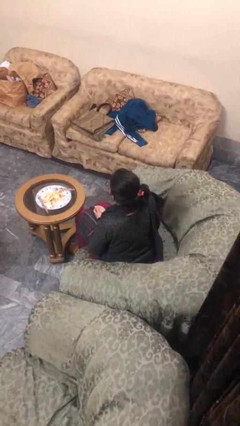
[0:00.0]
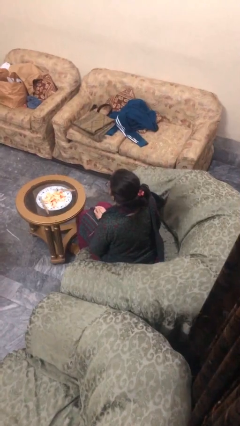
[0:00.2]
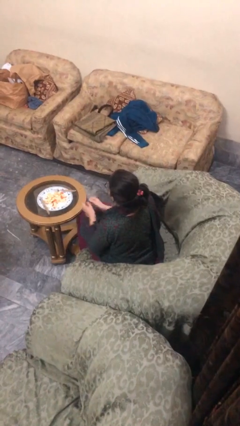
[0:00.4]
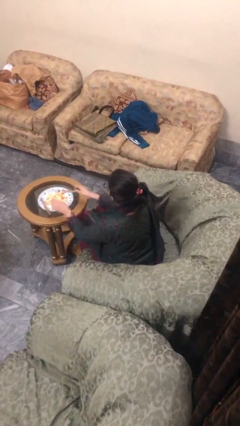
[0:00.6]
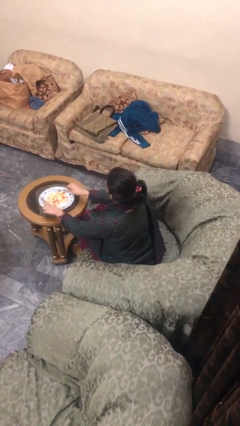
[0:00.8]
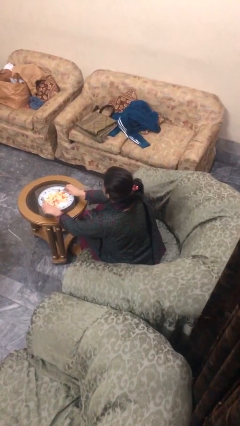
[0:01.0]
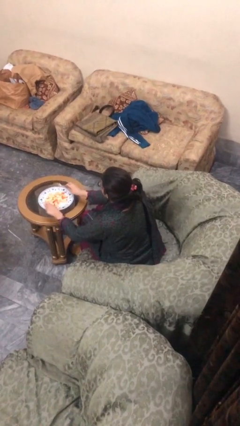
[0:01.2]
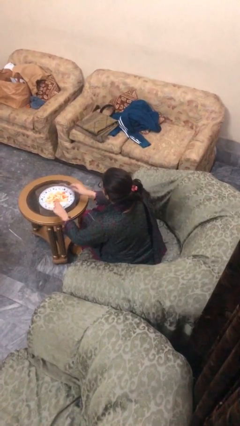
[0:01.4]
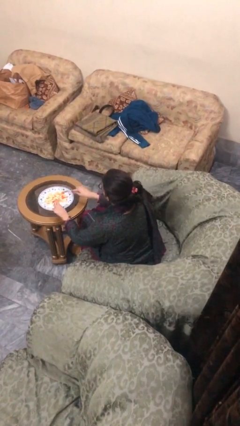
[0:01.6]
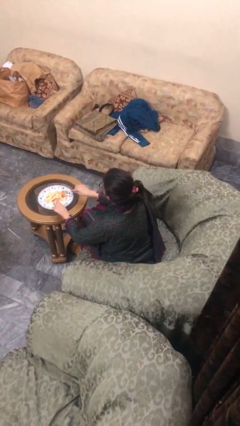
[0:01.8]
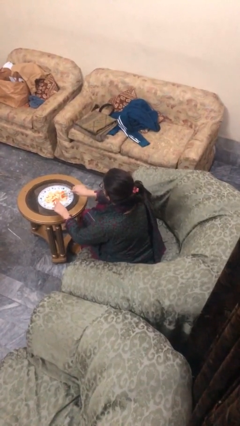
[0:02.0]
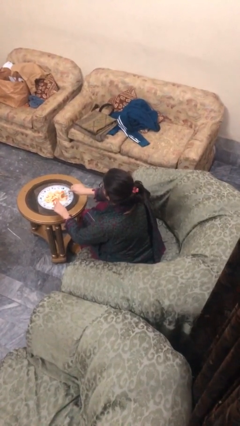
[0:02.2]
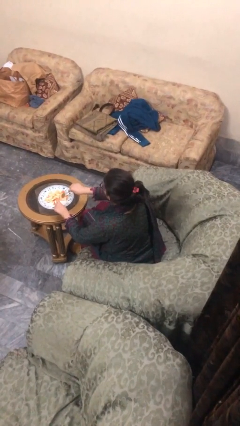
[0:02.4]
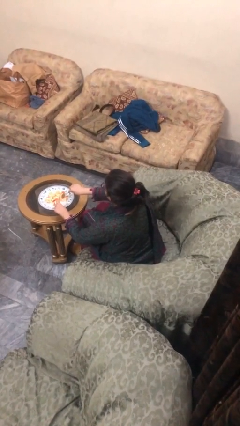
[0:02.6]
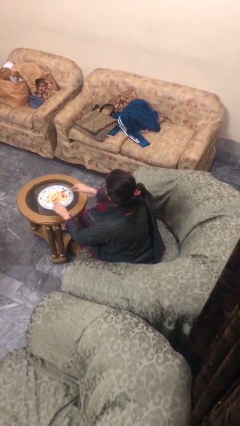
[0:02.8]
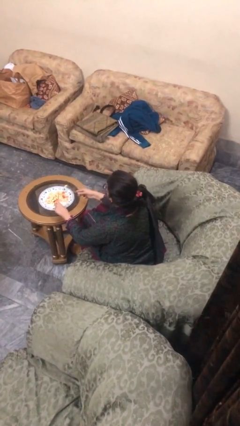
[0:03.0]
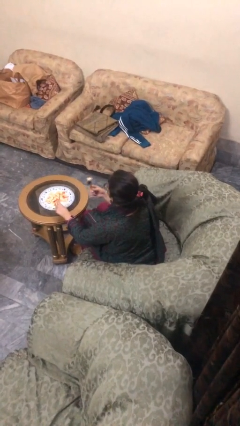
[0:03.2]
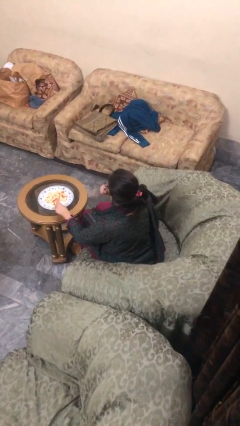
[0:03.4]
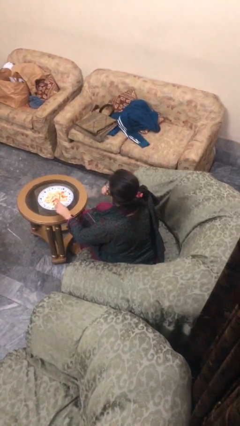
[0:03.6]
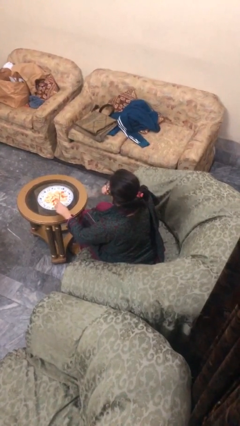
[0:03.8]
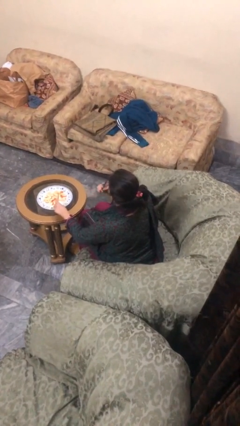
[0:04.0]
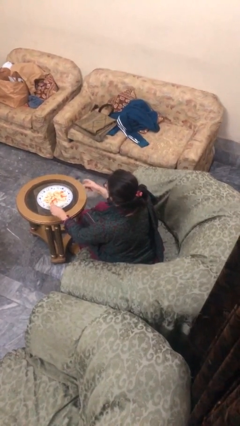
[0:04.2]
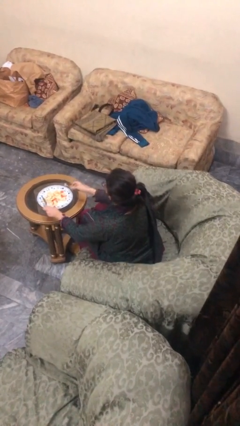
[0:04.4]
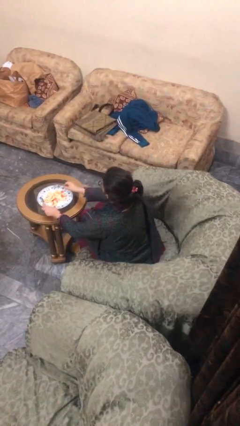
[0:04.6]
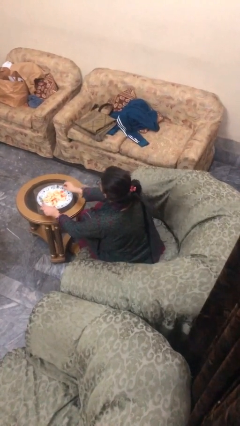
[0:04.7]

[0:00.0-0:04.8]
person eats with utensil

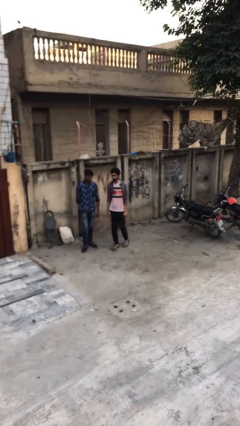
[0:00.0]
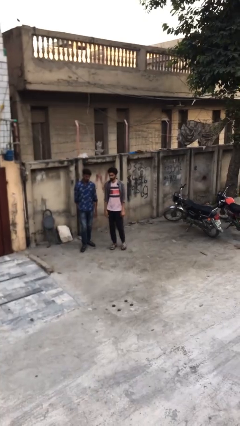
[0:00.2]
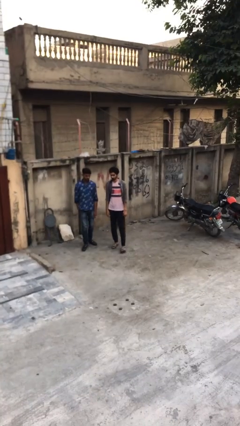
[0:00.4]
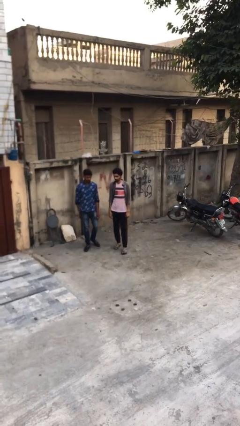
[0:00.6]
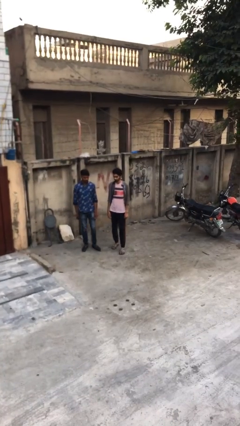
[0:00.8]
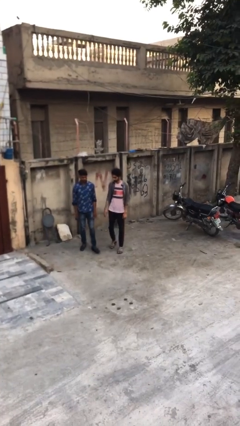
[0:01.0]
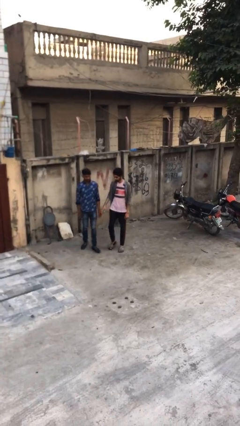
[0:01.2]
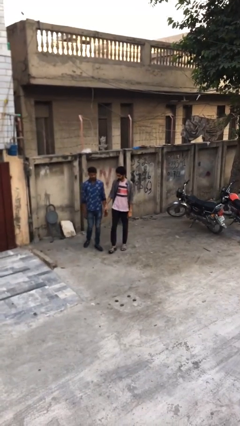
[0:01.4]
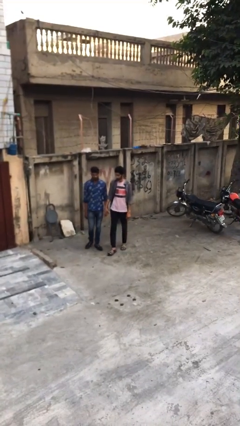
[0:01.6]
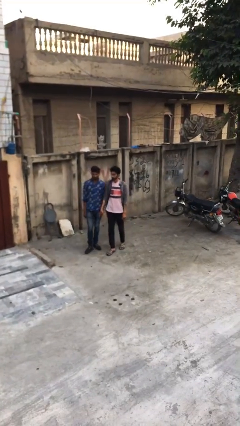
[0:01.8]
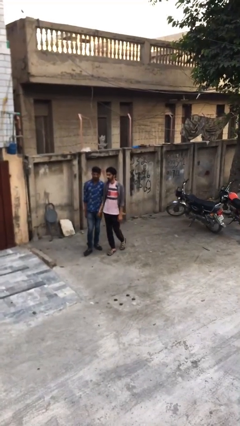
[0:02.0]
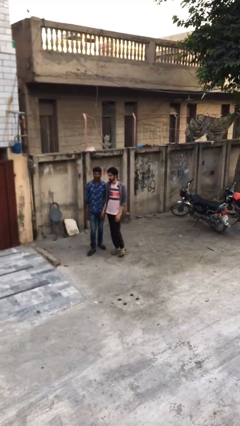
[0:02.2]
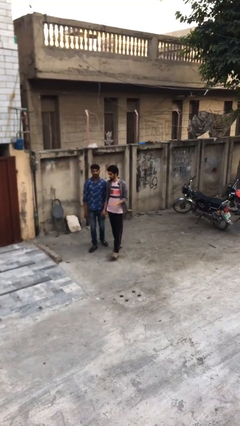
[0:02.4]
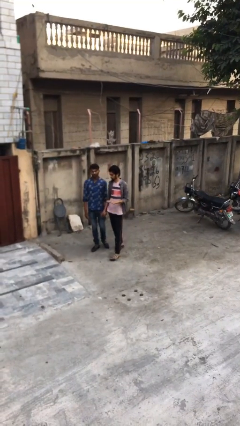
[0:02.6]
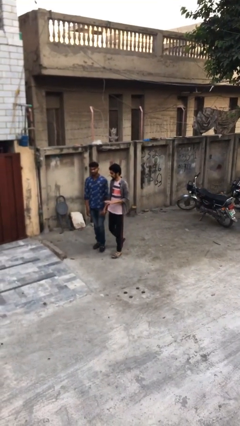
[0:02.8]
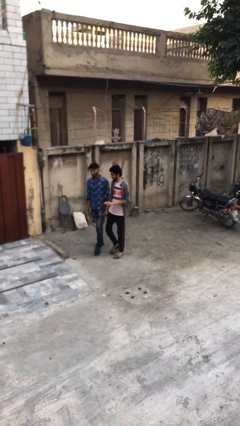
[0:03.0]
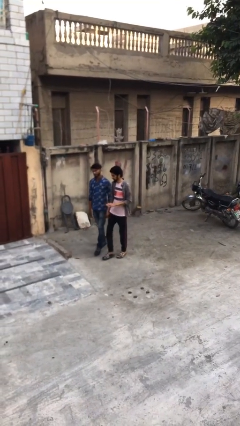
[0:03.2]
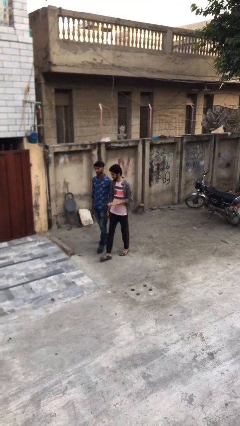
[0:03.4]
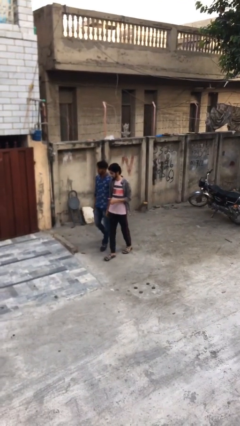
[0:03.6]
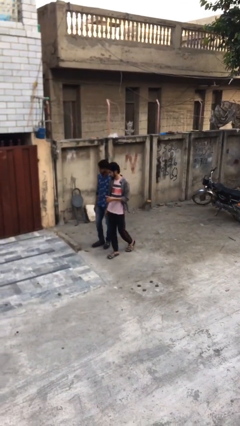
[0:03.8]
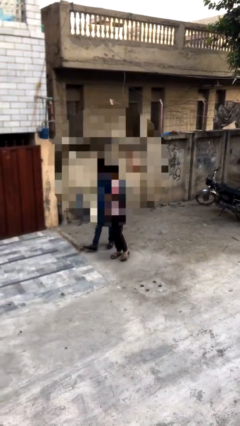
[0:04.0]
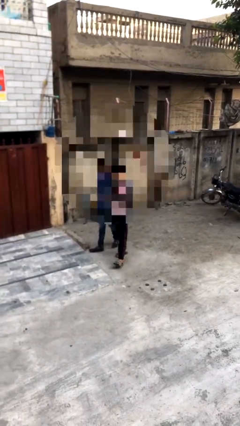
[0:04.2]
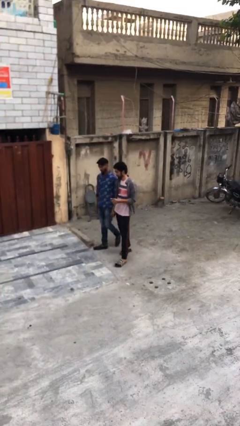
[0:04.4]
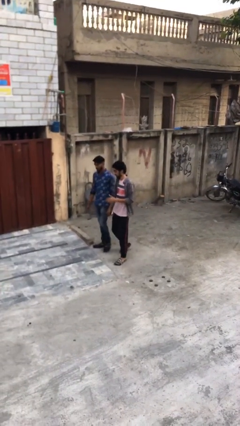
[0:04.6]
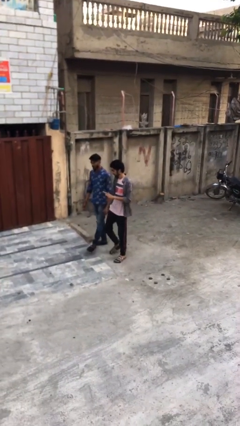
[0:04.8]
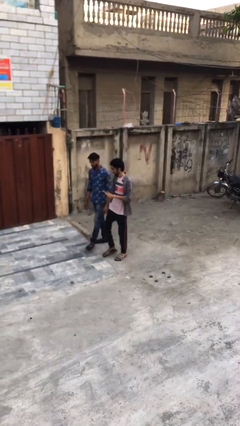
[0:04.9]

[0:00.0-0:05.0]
person holds hand

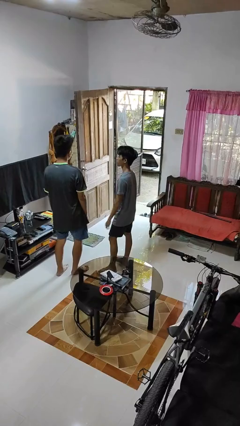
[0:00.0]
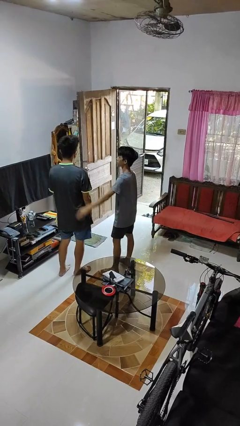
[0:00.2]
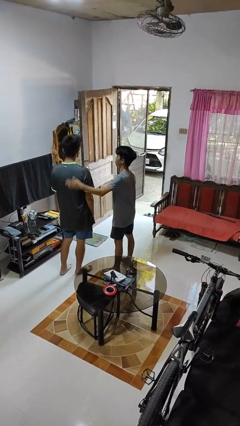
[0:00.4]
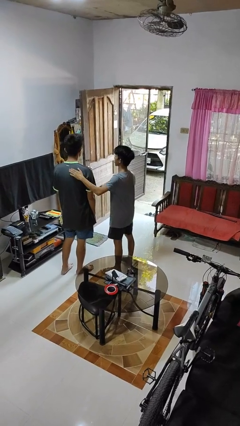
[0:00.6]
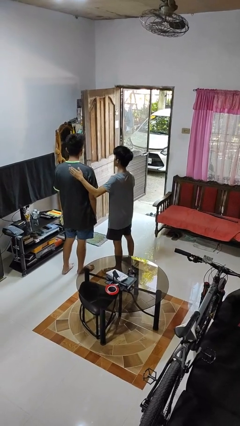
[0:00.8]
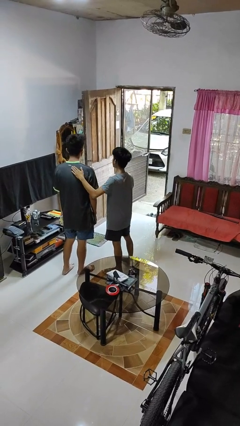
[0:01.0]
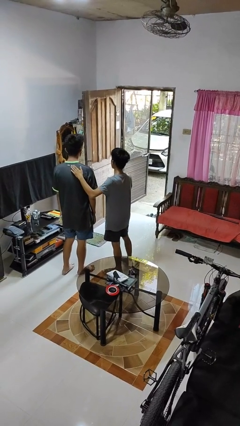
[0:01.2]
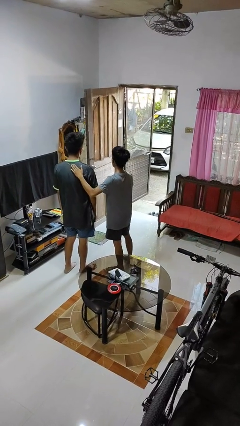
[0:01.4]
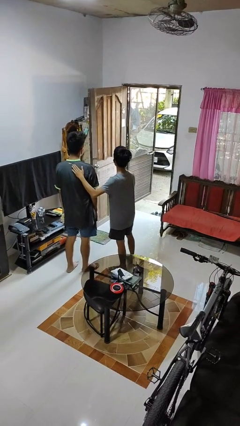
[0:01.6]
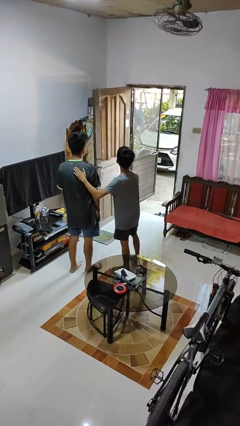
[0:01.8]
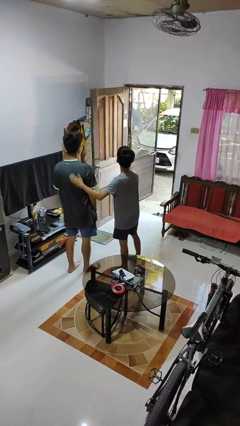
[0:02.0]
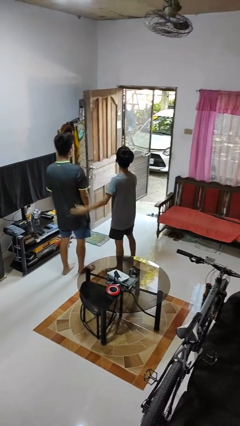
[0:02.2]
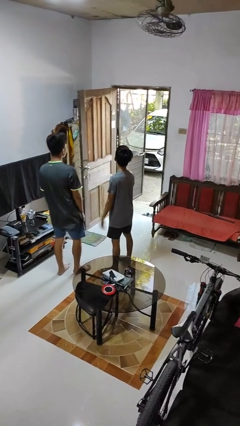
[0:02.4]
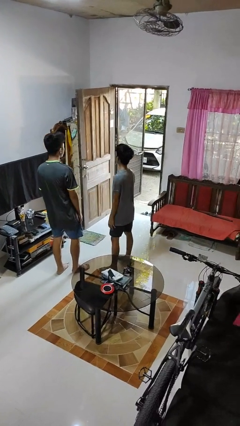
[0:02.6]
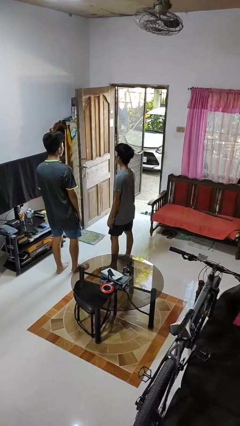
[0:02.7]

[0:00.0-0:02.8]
person touches back of person

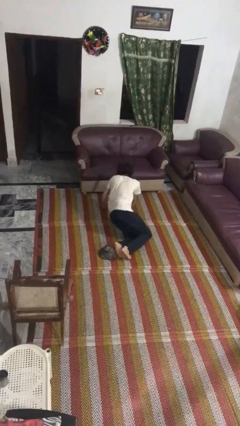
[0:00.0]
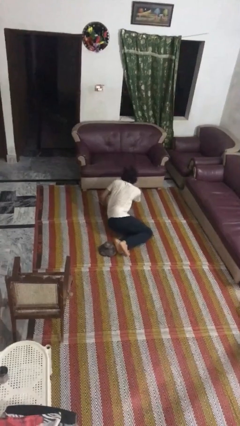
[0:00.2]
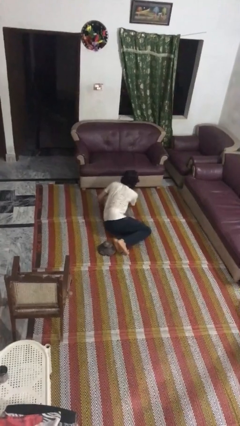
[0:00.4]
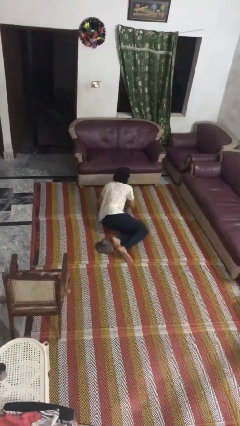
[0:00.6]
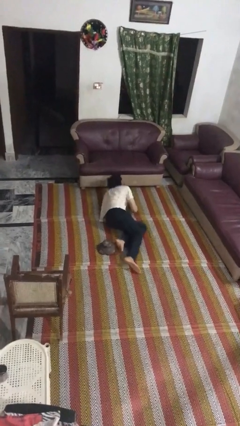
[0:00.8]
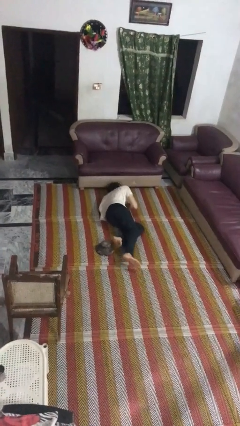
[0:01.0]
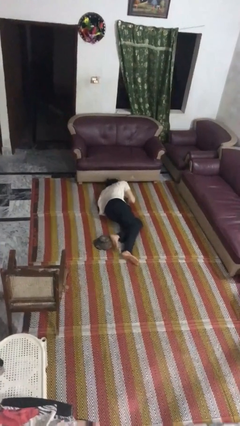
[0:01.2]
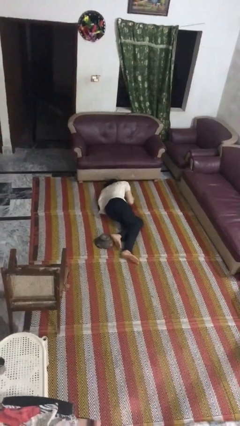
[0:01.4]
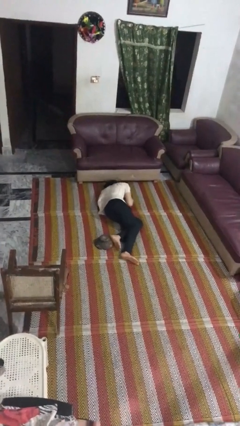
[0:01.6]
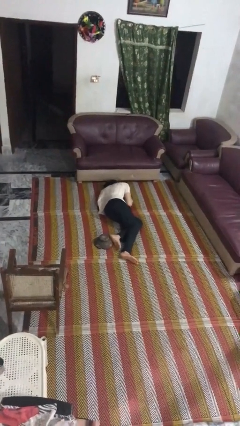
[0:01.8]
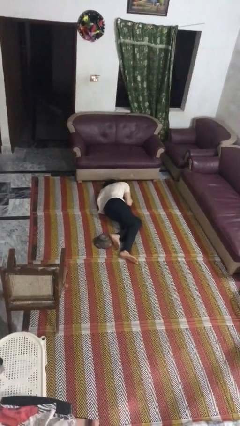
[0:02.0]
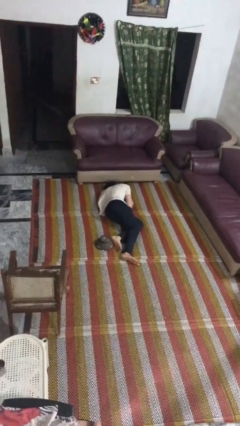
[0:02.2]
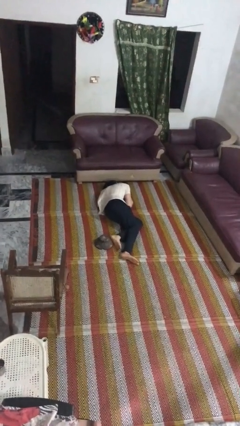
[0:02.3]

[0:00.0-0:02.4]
person lies down on floor

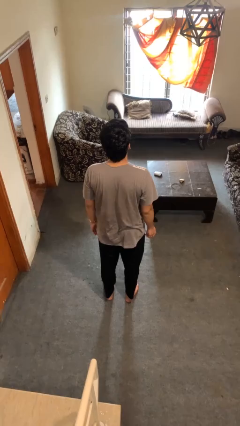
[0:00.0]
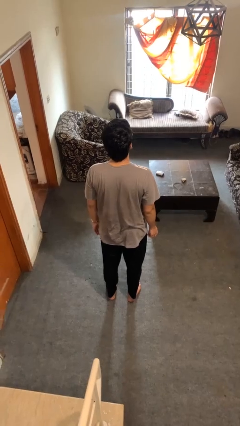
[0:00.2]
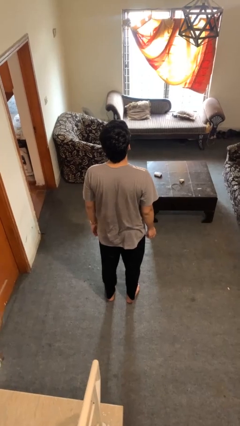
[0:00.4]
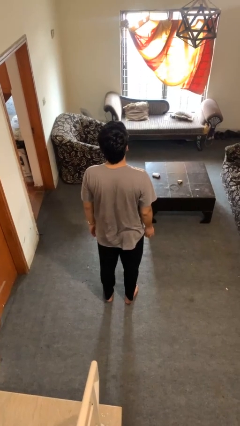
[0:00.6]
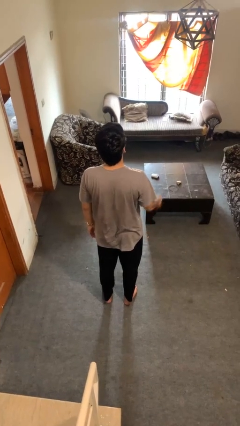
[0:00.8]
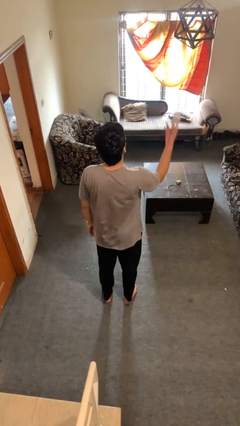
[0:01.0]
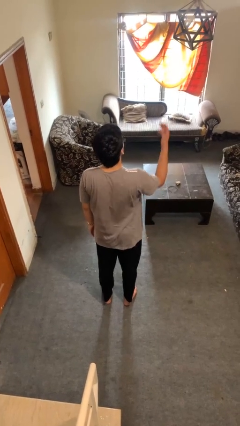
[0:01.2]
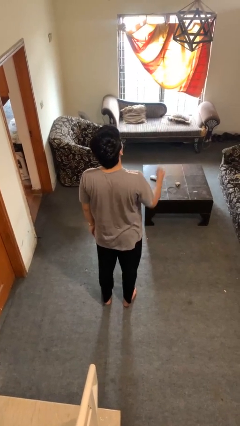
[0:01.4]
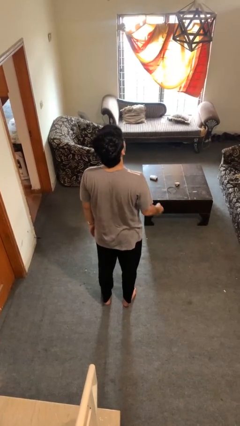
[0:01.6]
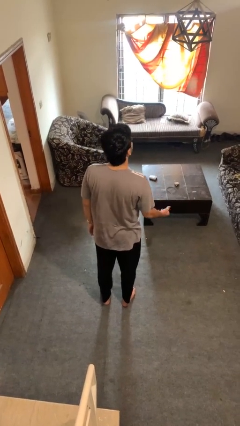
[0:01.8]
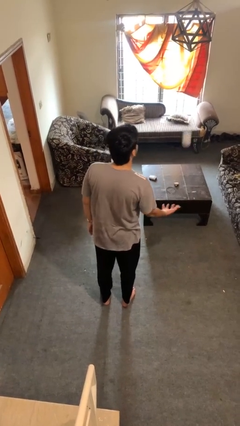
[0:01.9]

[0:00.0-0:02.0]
person drops object

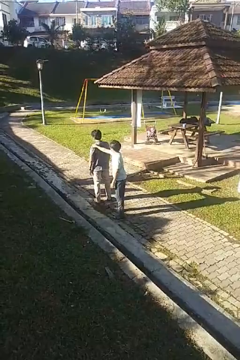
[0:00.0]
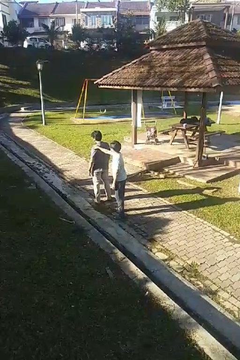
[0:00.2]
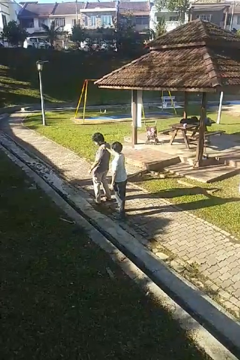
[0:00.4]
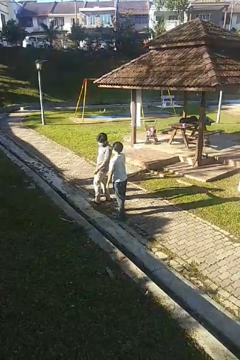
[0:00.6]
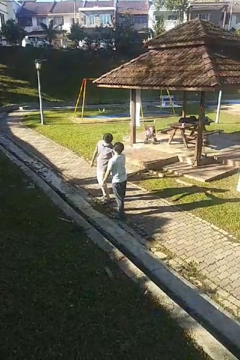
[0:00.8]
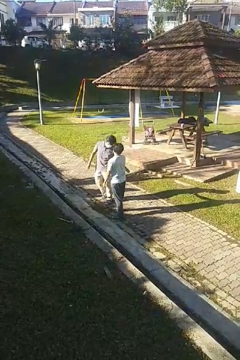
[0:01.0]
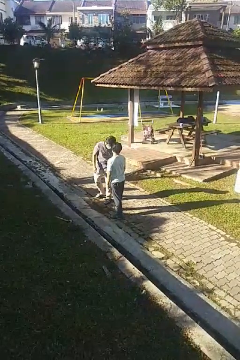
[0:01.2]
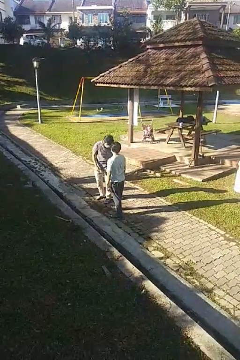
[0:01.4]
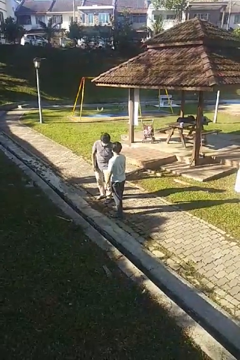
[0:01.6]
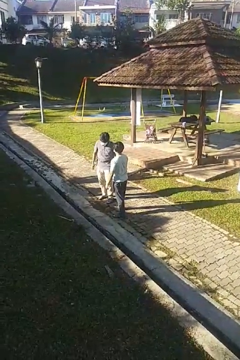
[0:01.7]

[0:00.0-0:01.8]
person spins person around
